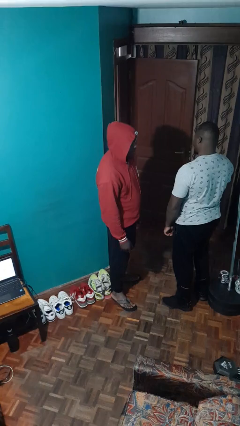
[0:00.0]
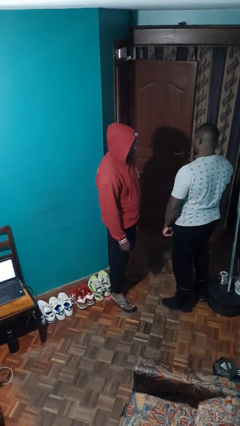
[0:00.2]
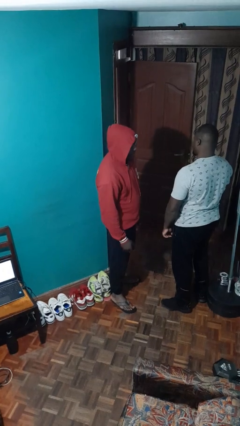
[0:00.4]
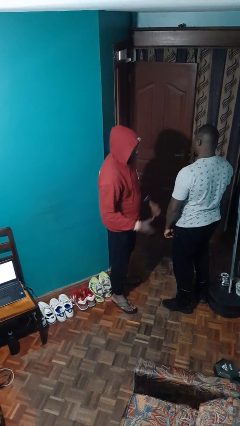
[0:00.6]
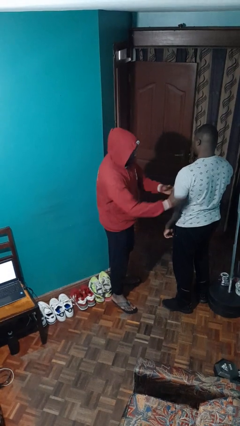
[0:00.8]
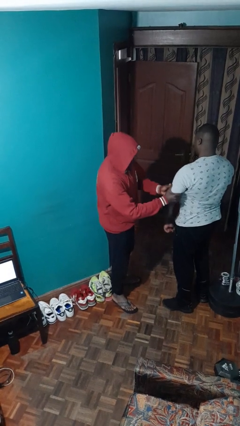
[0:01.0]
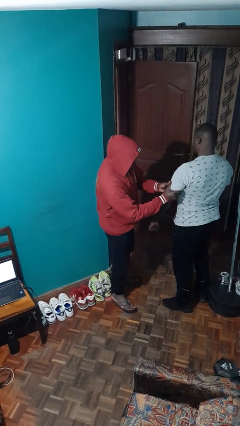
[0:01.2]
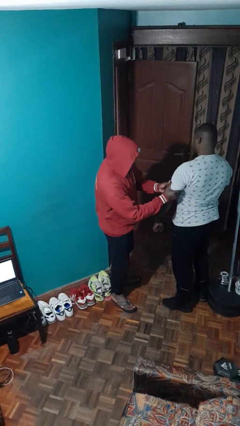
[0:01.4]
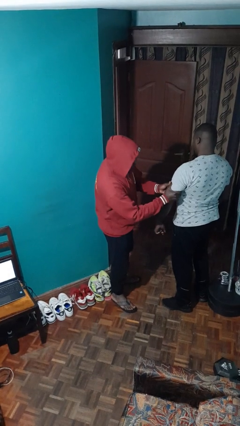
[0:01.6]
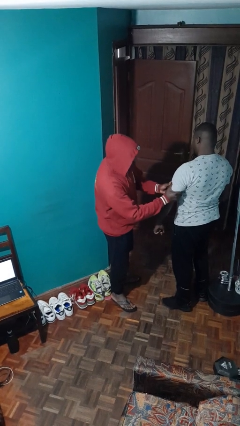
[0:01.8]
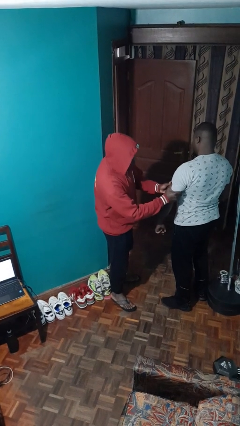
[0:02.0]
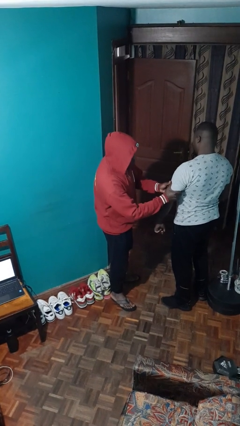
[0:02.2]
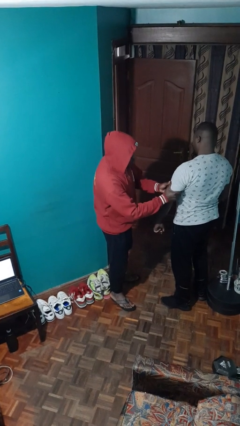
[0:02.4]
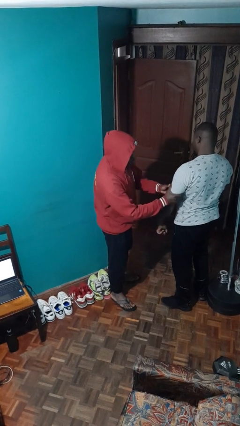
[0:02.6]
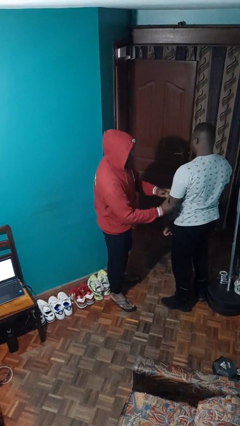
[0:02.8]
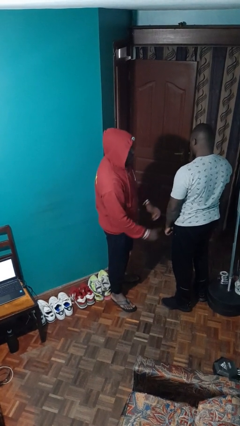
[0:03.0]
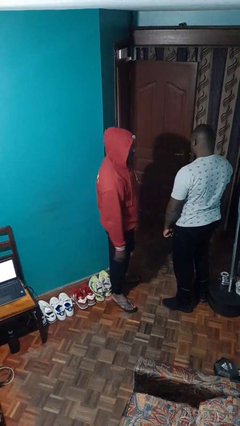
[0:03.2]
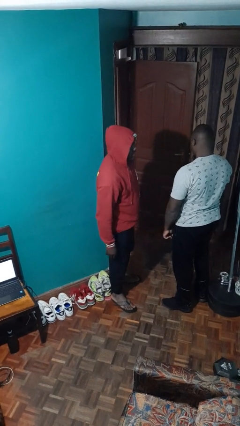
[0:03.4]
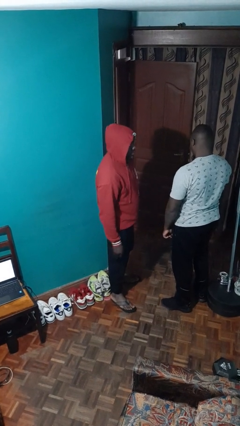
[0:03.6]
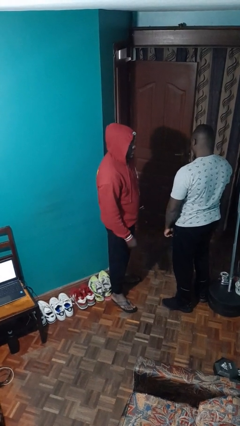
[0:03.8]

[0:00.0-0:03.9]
person grabs person by bicep

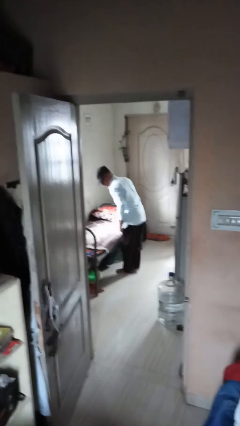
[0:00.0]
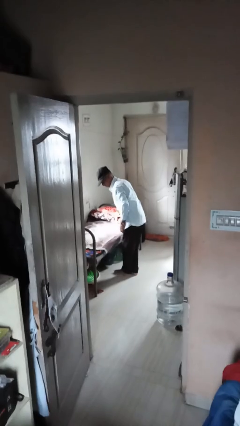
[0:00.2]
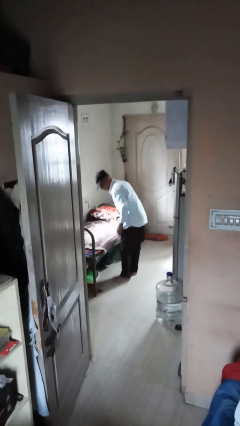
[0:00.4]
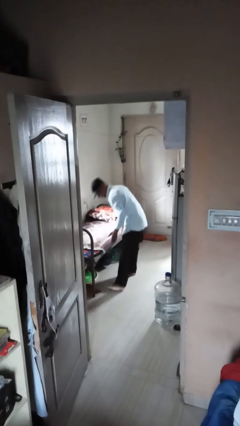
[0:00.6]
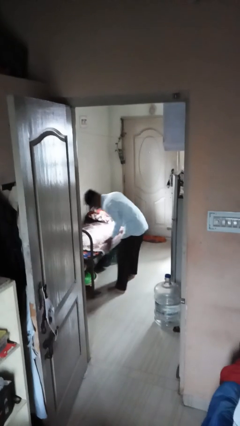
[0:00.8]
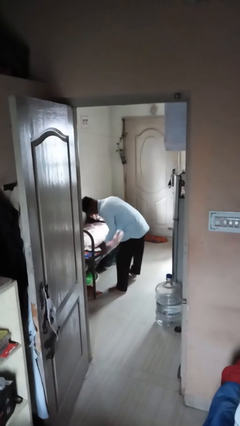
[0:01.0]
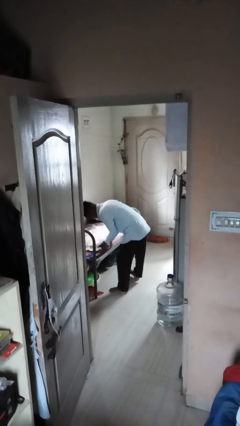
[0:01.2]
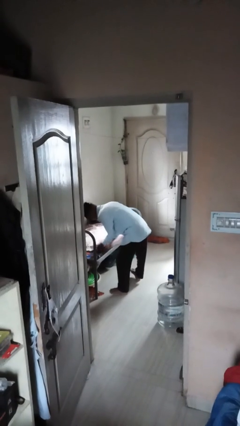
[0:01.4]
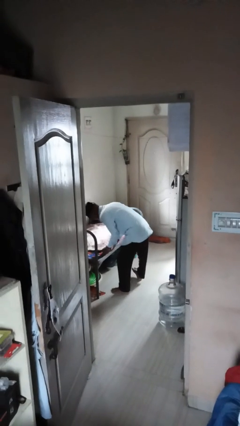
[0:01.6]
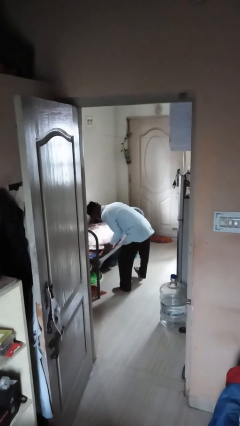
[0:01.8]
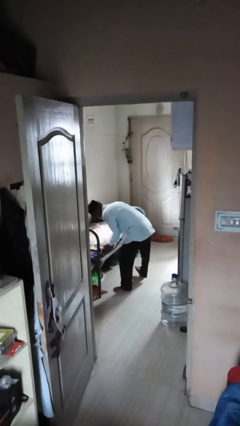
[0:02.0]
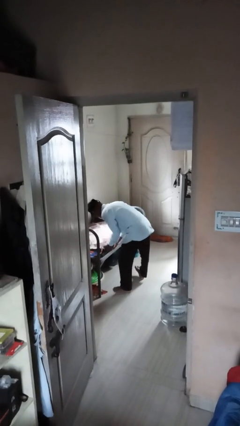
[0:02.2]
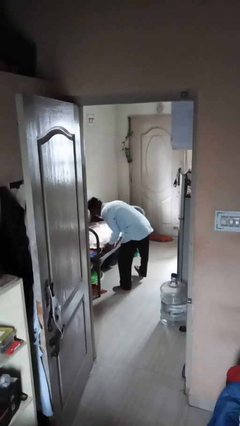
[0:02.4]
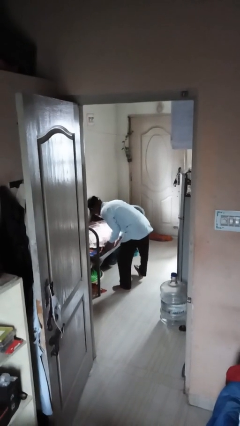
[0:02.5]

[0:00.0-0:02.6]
person makes bed

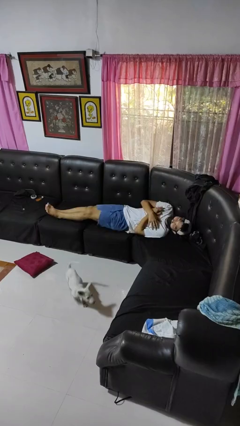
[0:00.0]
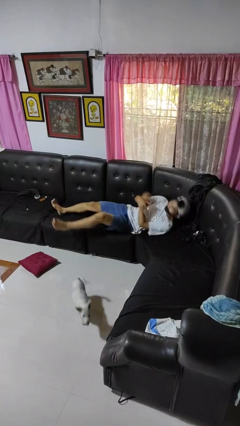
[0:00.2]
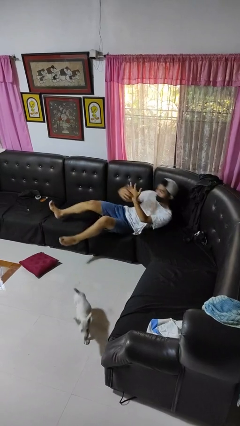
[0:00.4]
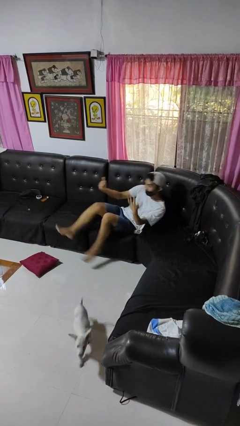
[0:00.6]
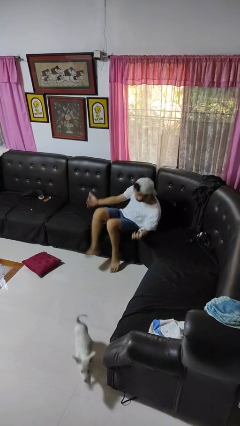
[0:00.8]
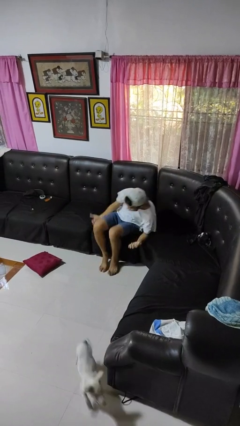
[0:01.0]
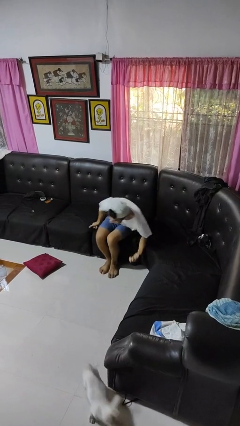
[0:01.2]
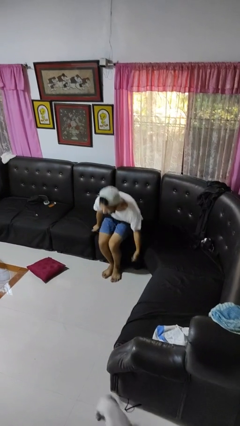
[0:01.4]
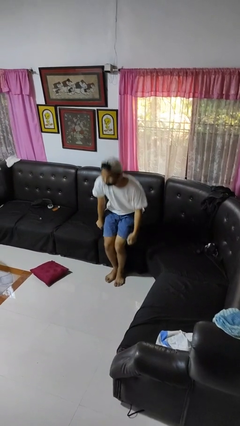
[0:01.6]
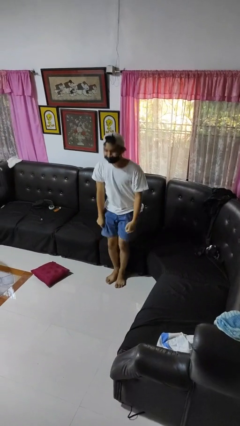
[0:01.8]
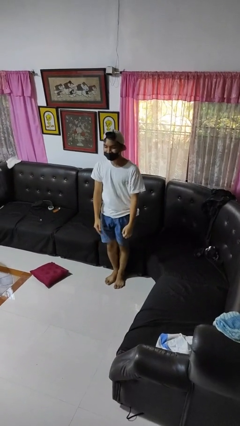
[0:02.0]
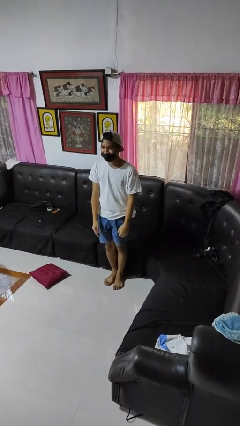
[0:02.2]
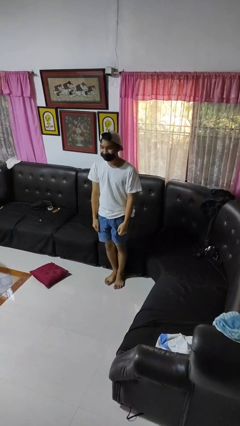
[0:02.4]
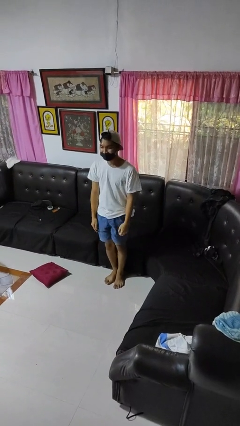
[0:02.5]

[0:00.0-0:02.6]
person stands up

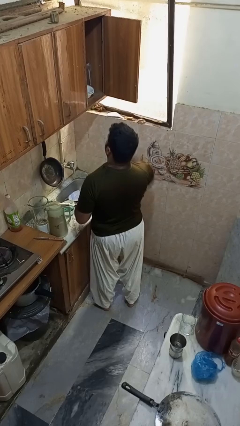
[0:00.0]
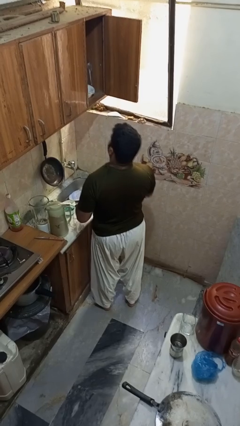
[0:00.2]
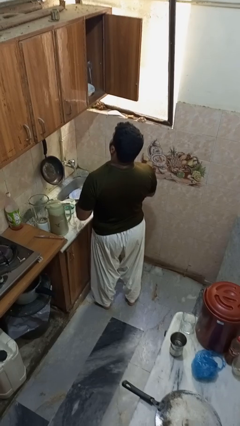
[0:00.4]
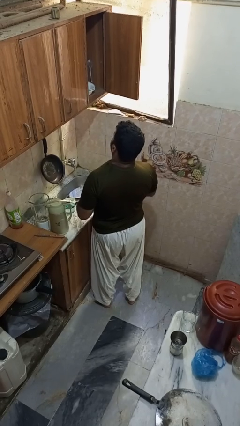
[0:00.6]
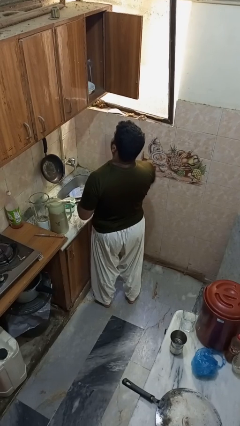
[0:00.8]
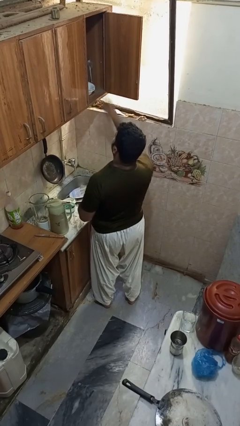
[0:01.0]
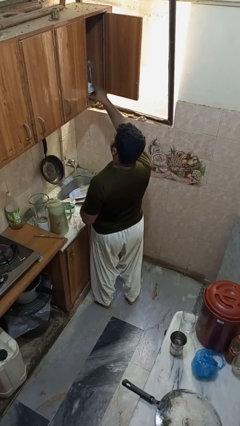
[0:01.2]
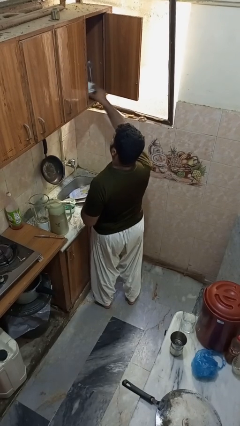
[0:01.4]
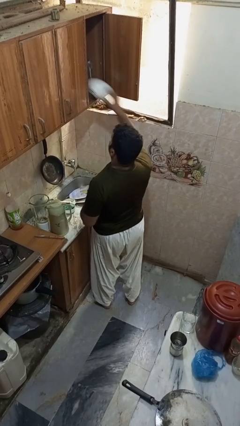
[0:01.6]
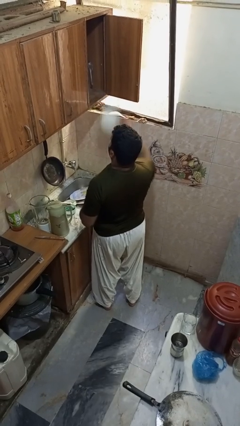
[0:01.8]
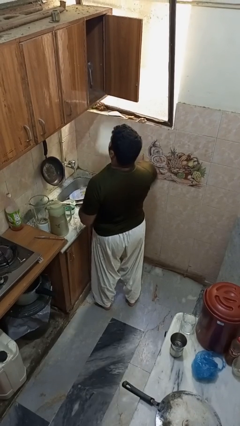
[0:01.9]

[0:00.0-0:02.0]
person takes object from cabinet

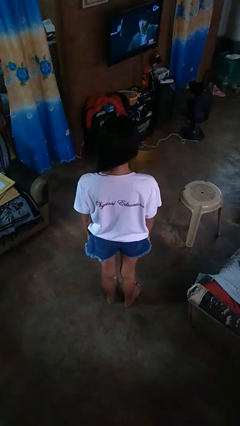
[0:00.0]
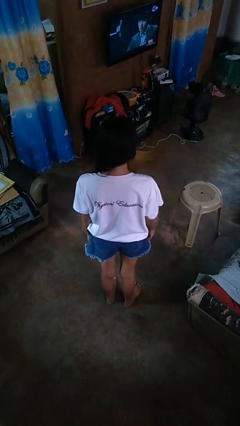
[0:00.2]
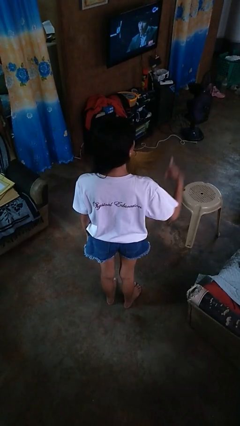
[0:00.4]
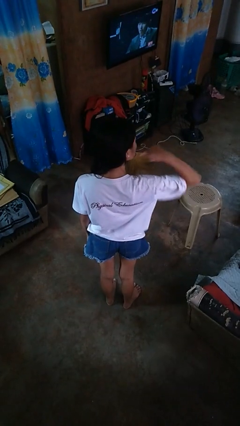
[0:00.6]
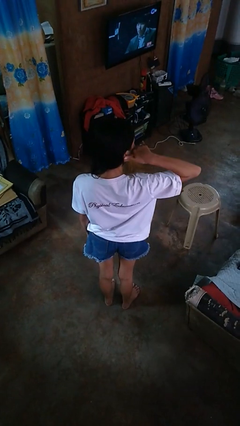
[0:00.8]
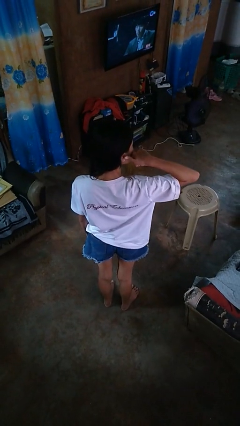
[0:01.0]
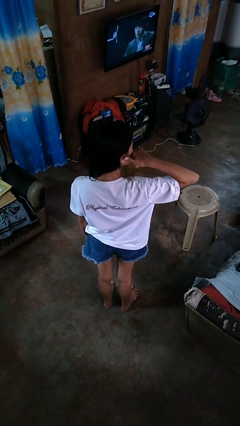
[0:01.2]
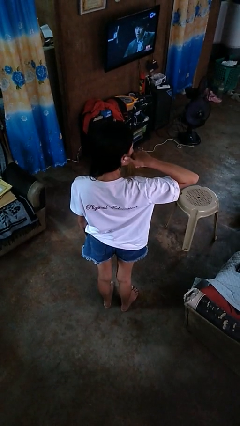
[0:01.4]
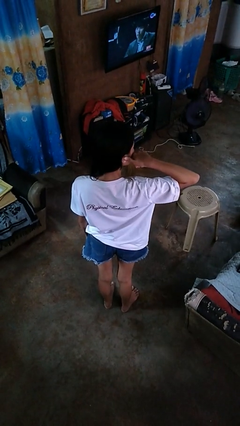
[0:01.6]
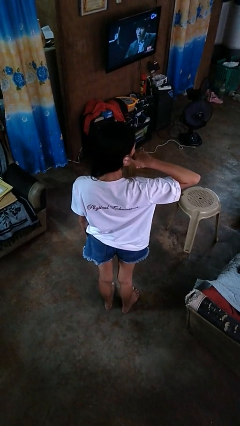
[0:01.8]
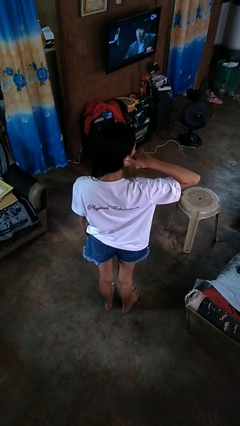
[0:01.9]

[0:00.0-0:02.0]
person gestures call me

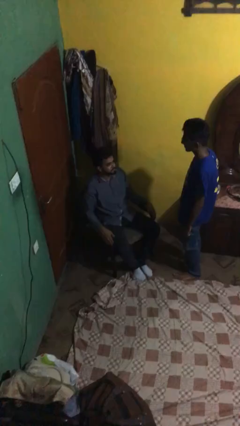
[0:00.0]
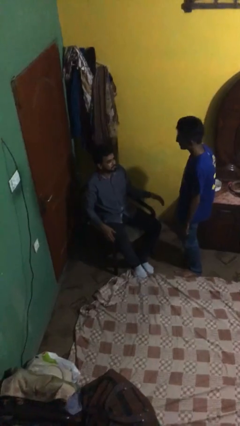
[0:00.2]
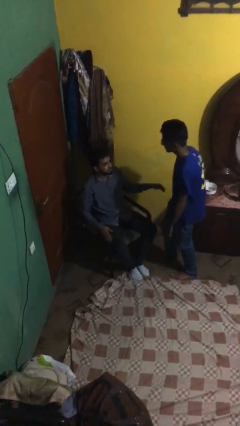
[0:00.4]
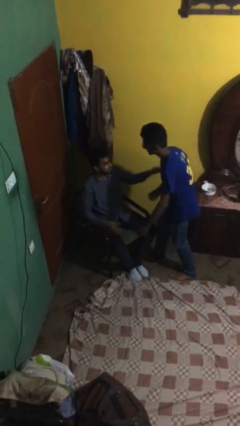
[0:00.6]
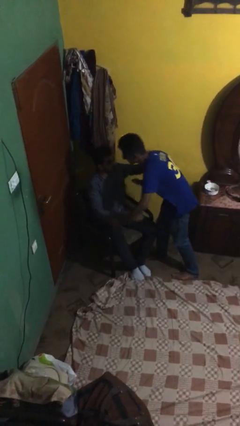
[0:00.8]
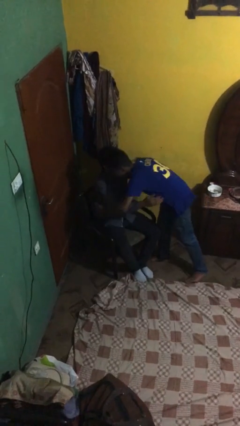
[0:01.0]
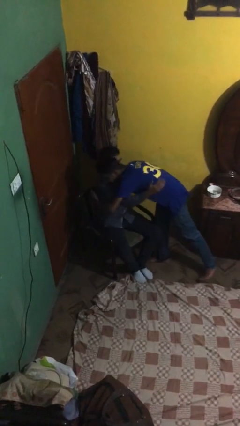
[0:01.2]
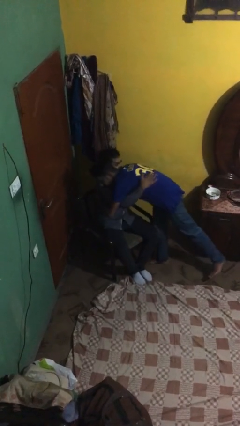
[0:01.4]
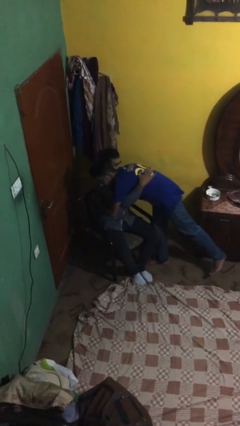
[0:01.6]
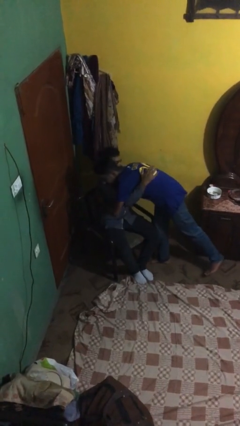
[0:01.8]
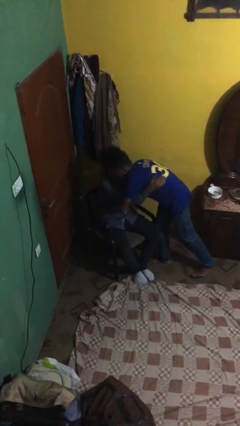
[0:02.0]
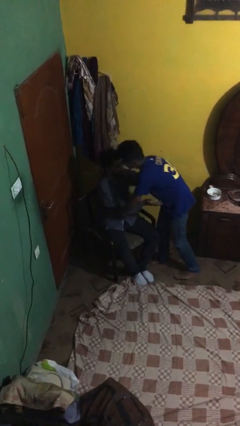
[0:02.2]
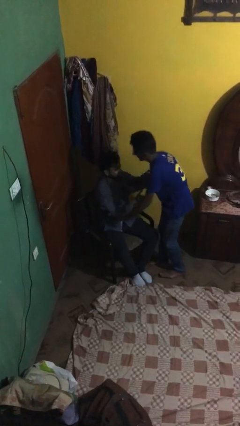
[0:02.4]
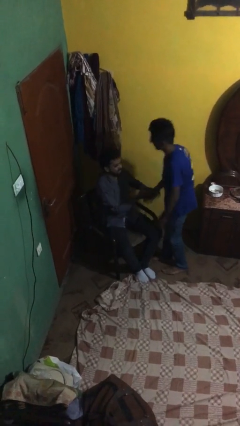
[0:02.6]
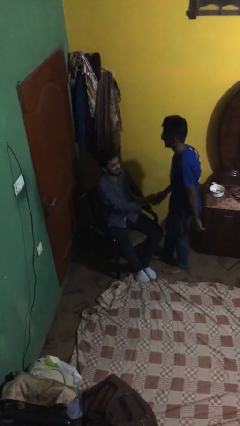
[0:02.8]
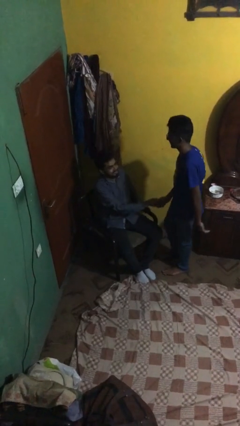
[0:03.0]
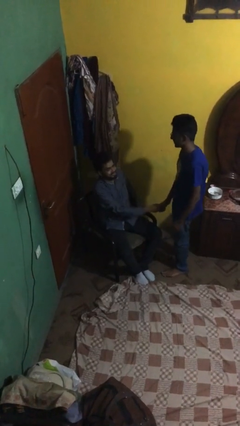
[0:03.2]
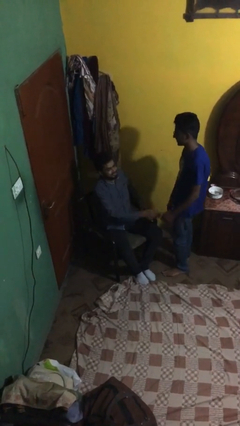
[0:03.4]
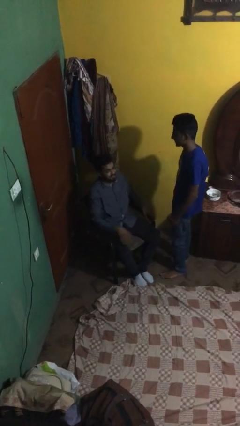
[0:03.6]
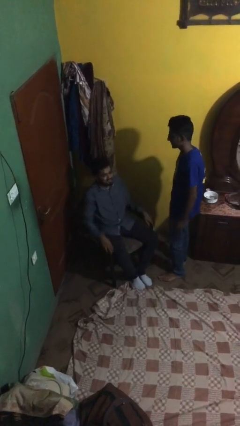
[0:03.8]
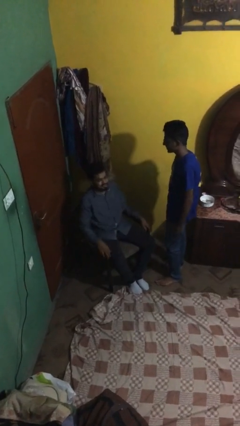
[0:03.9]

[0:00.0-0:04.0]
person embraces person
